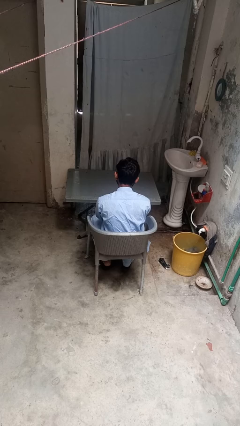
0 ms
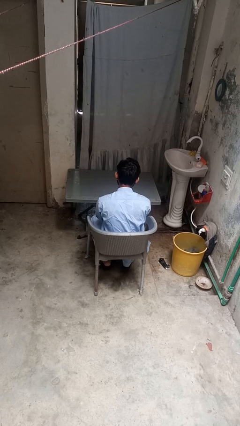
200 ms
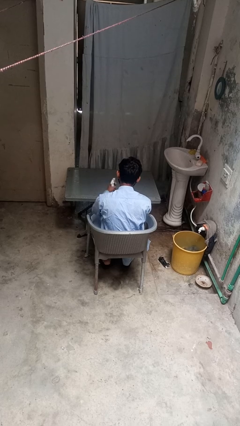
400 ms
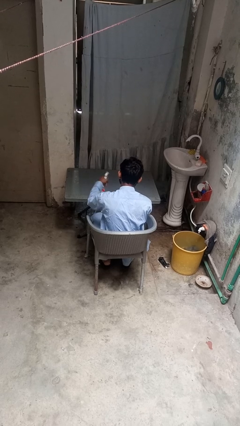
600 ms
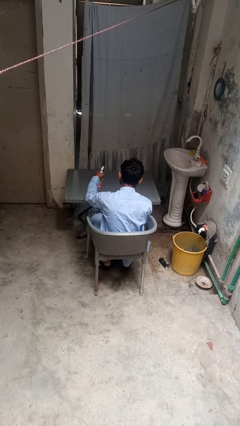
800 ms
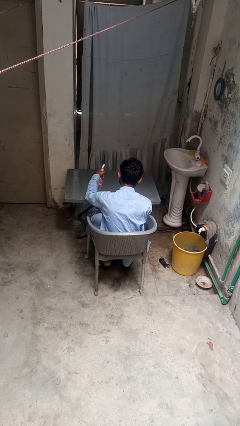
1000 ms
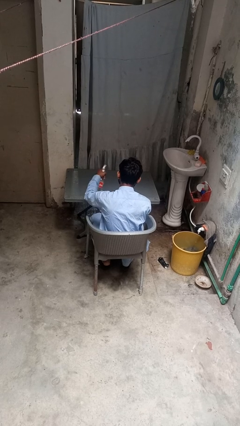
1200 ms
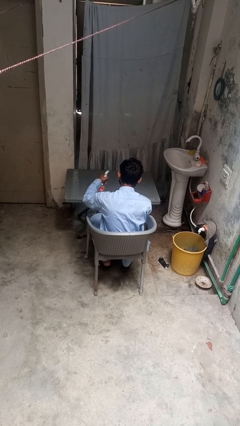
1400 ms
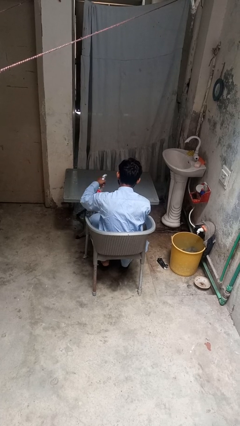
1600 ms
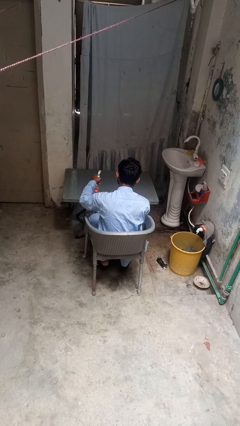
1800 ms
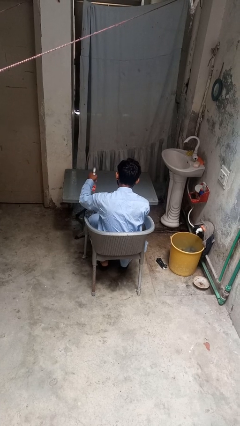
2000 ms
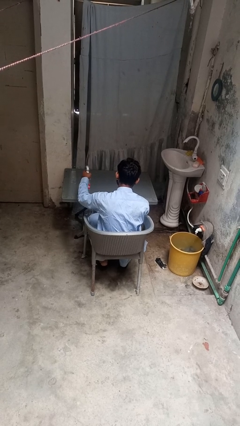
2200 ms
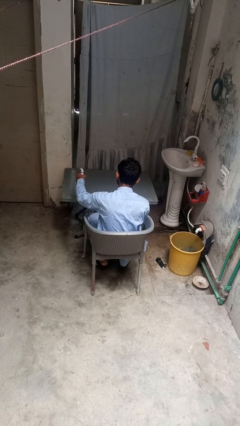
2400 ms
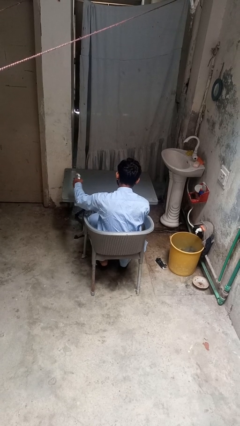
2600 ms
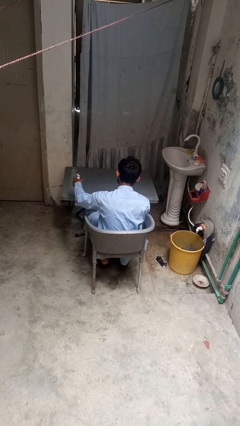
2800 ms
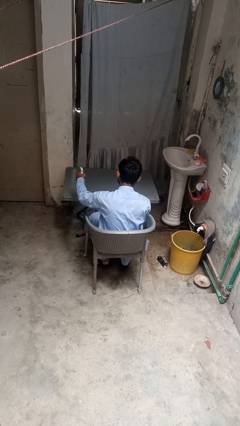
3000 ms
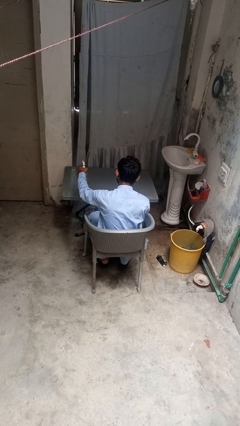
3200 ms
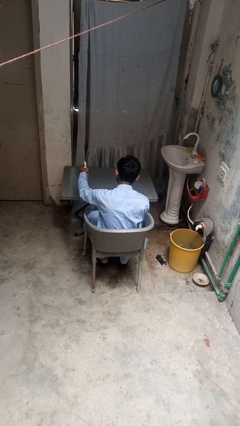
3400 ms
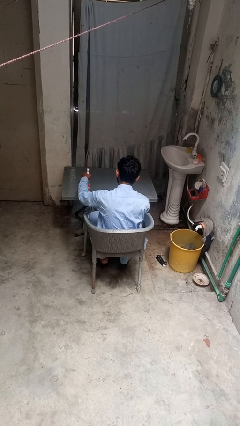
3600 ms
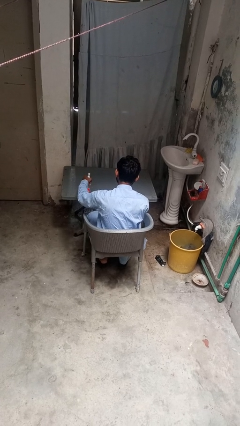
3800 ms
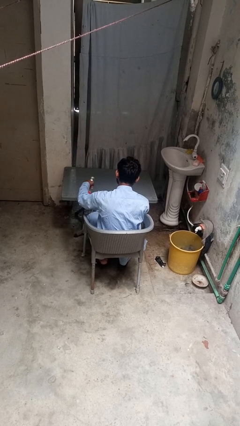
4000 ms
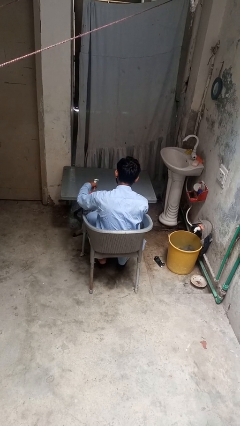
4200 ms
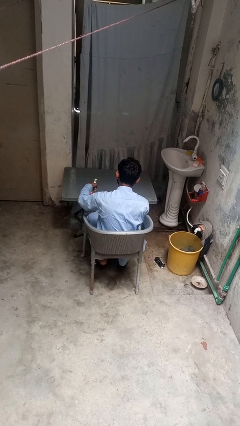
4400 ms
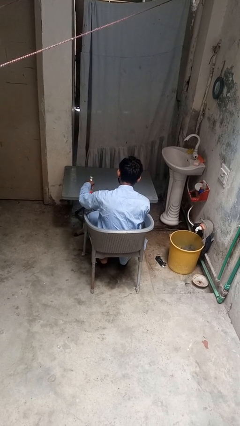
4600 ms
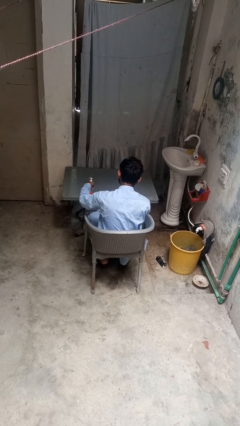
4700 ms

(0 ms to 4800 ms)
person sprays from bottle

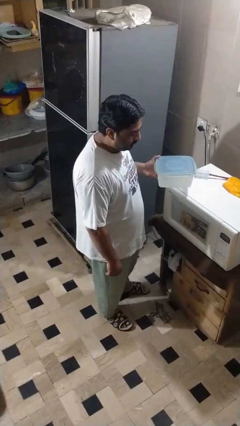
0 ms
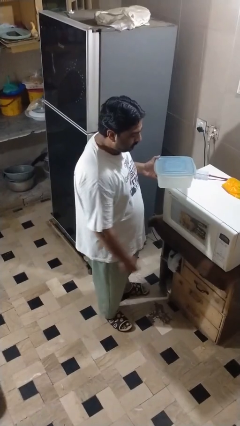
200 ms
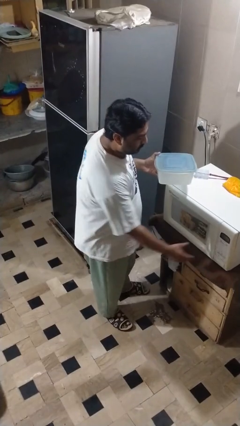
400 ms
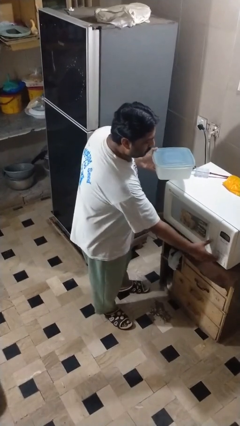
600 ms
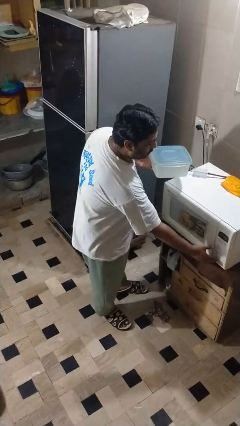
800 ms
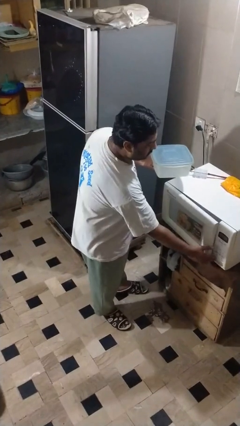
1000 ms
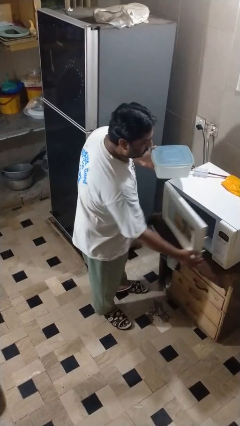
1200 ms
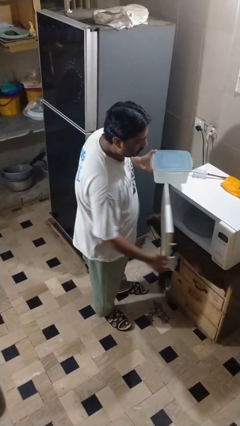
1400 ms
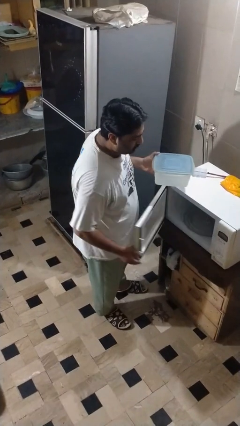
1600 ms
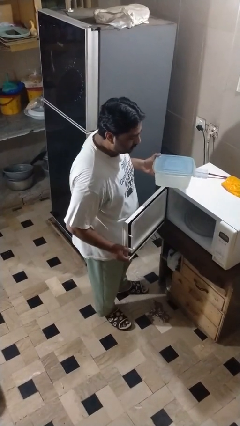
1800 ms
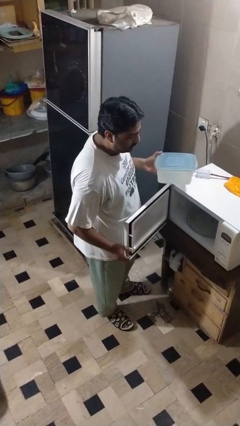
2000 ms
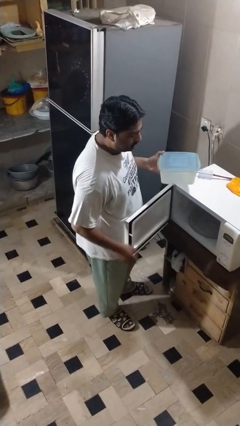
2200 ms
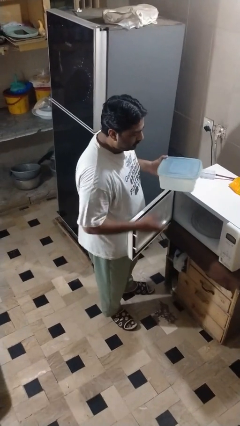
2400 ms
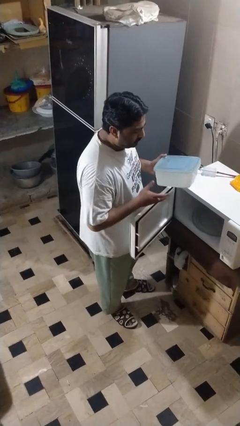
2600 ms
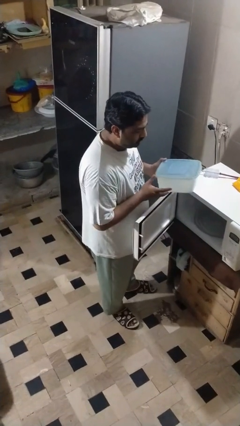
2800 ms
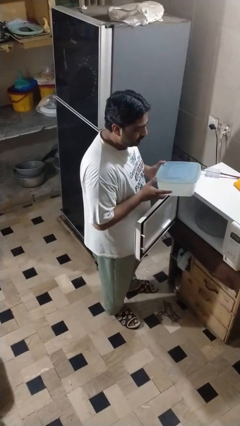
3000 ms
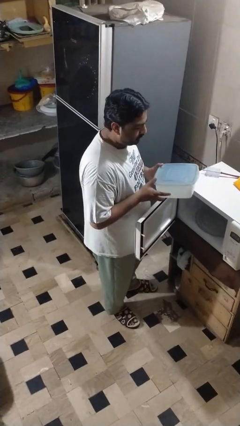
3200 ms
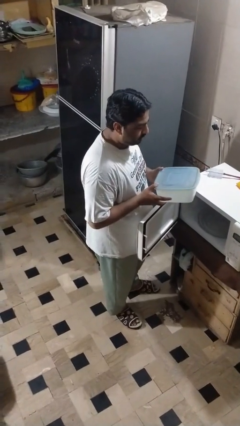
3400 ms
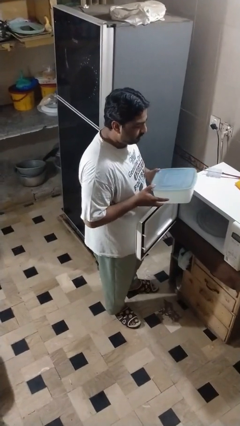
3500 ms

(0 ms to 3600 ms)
person opens microwave

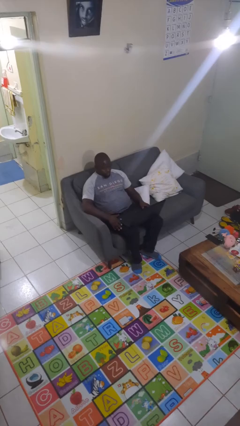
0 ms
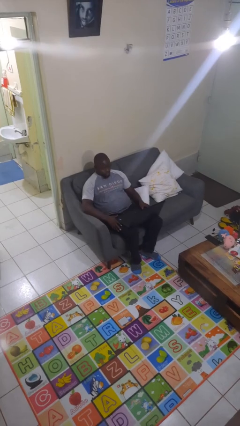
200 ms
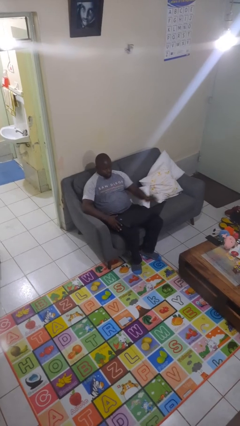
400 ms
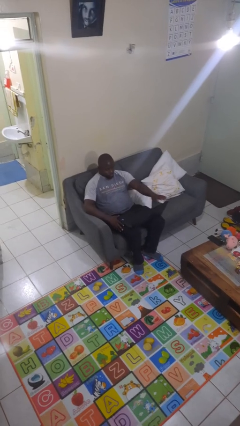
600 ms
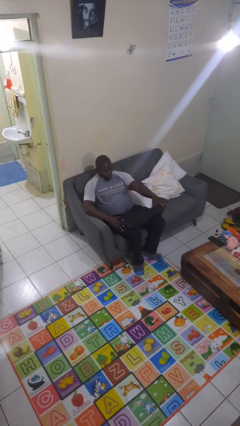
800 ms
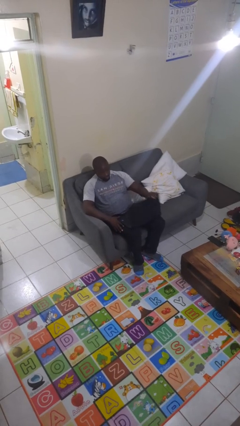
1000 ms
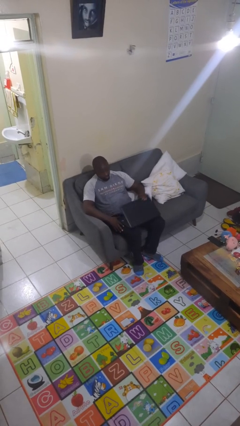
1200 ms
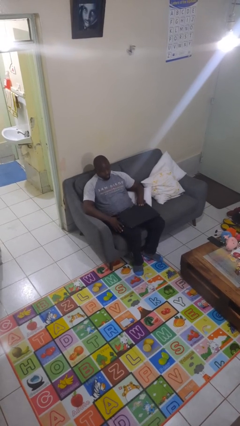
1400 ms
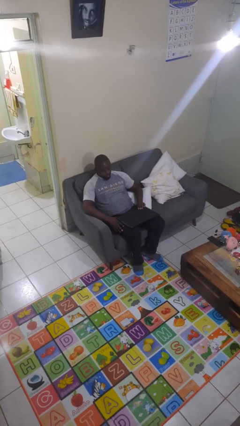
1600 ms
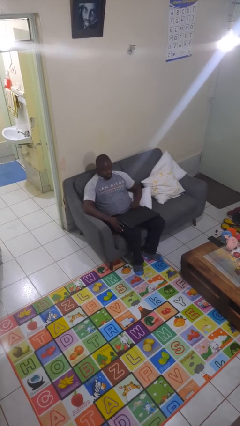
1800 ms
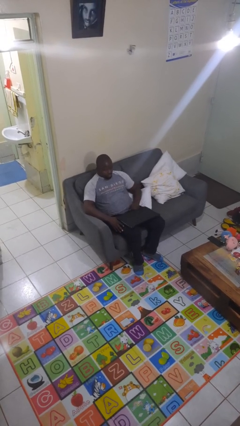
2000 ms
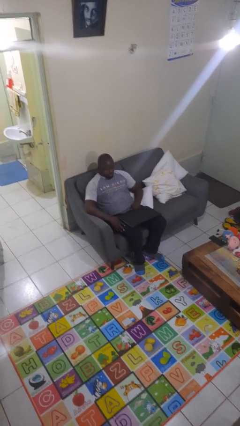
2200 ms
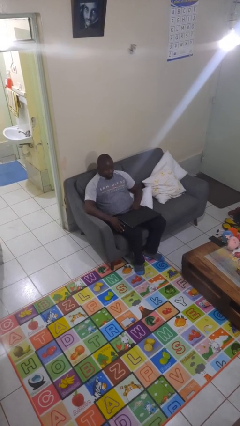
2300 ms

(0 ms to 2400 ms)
person closes laptop

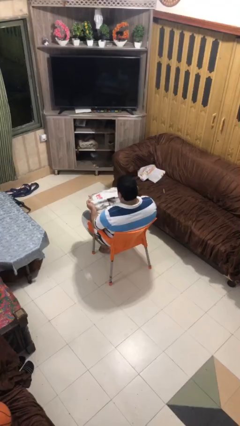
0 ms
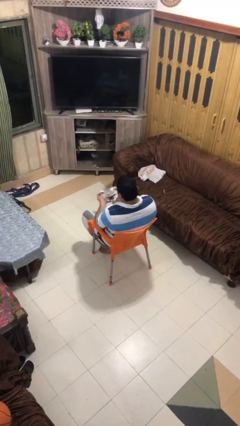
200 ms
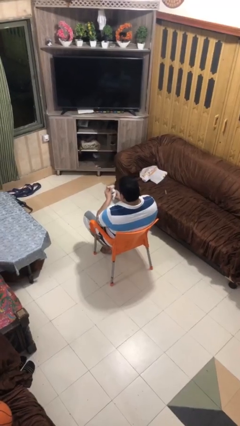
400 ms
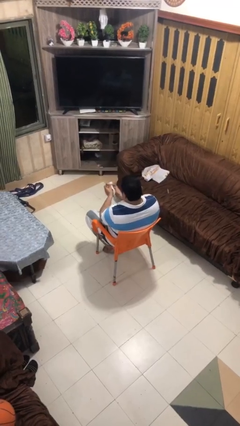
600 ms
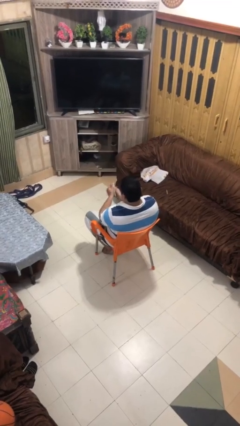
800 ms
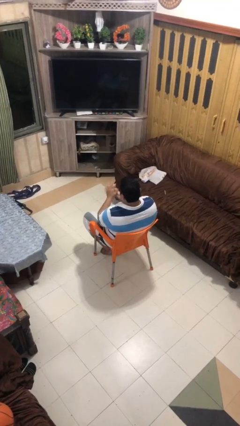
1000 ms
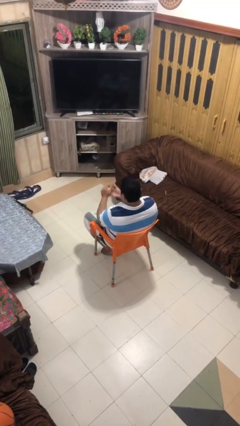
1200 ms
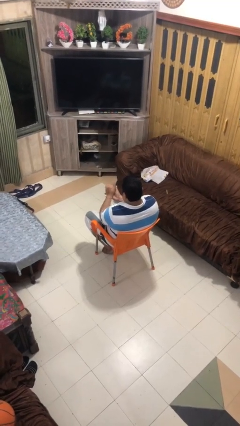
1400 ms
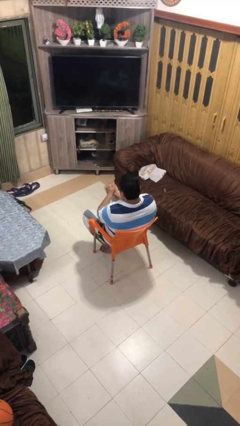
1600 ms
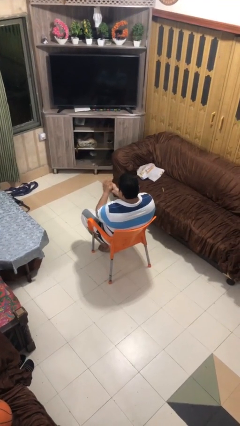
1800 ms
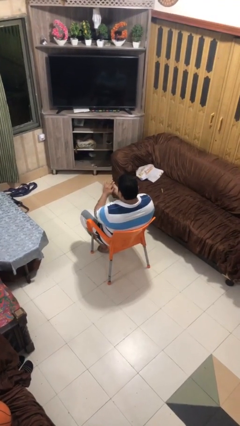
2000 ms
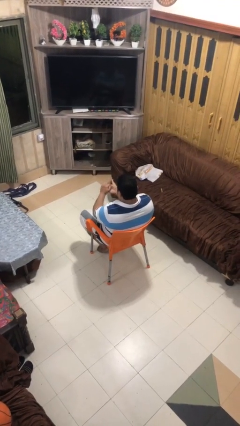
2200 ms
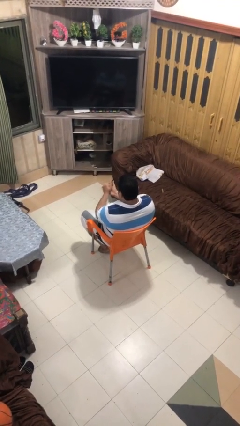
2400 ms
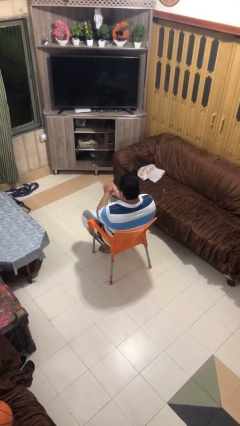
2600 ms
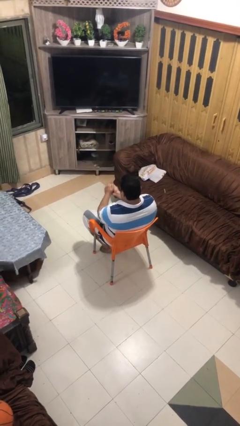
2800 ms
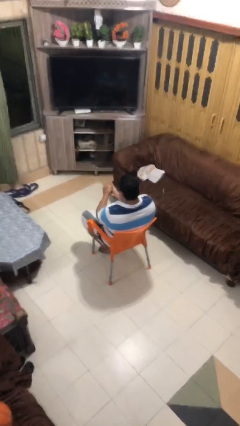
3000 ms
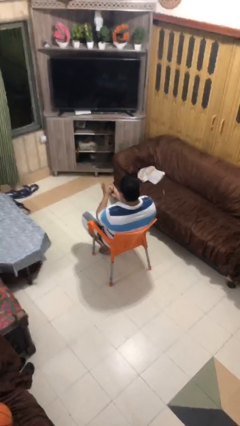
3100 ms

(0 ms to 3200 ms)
person crumples paper

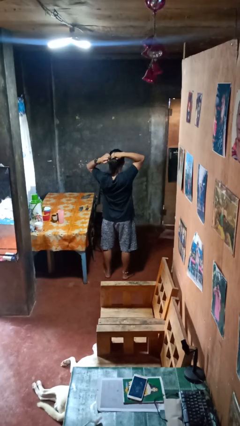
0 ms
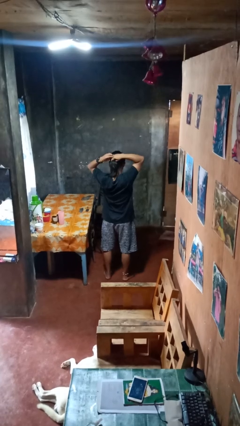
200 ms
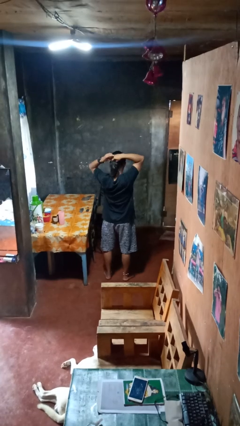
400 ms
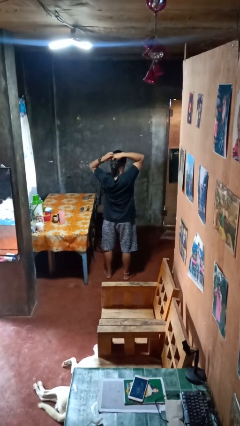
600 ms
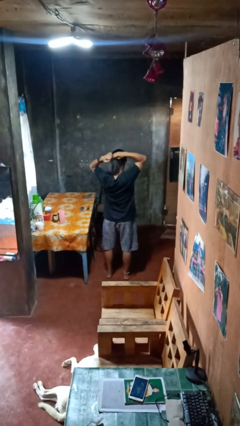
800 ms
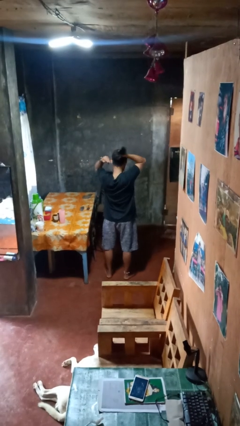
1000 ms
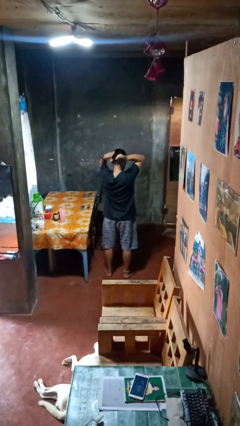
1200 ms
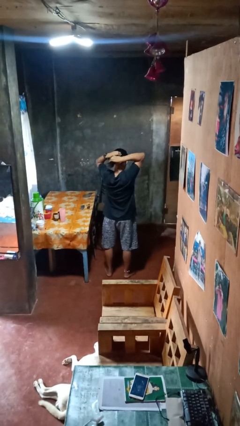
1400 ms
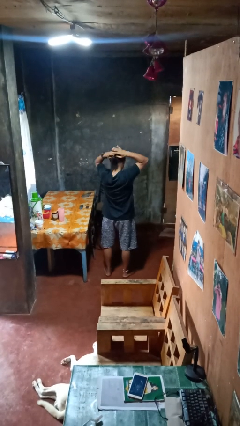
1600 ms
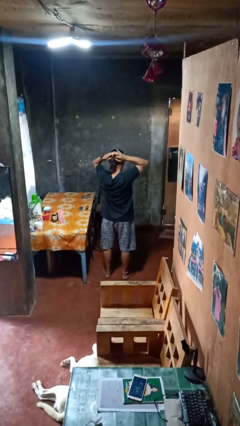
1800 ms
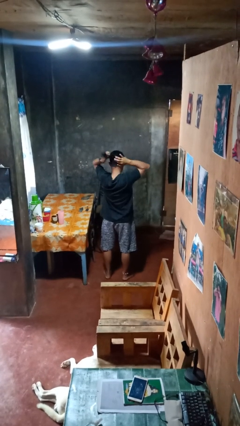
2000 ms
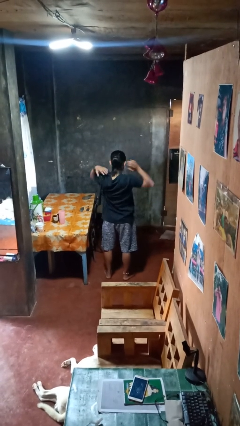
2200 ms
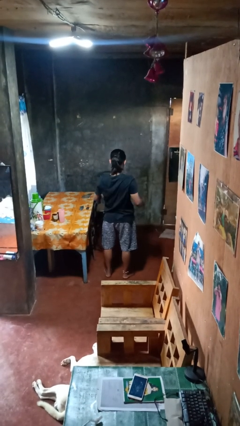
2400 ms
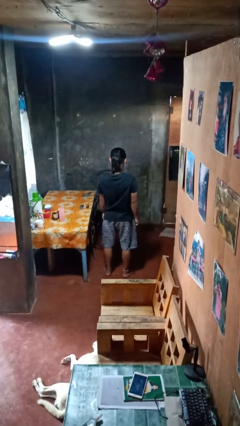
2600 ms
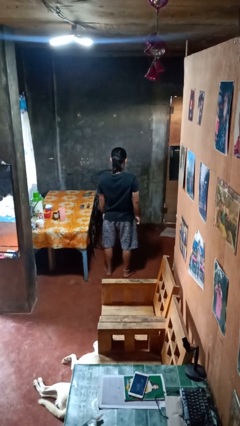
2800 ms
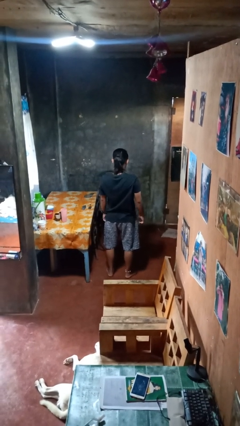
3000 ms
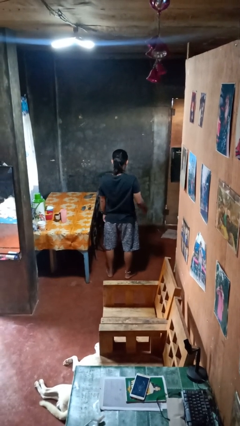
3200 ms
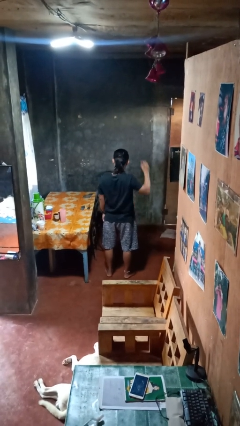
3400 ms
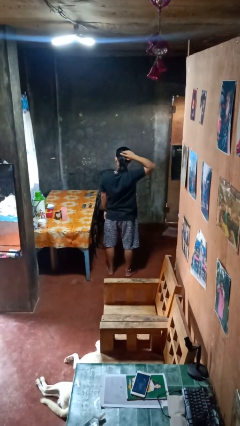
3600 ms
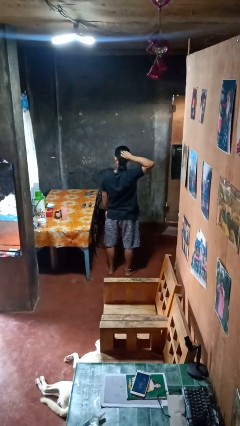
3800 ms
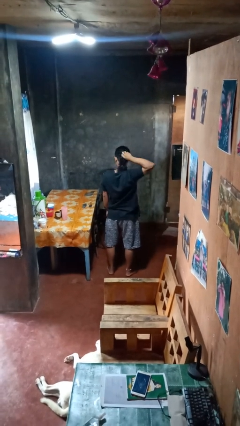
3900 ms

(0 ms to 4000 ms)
person puts hair in ponytail
